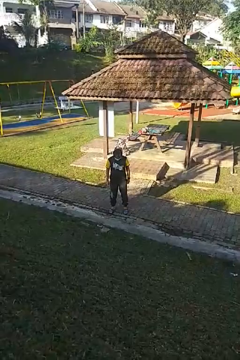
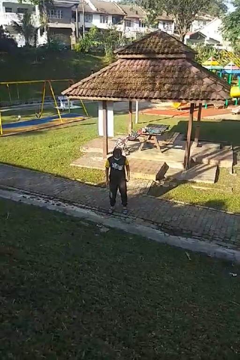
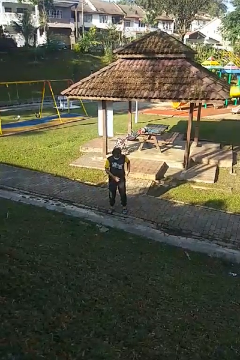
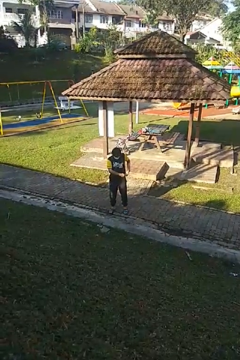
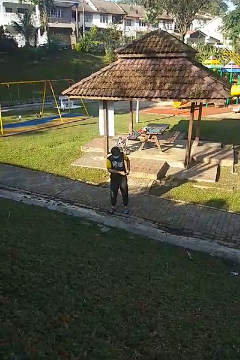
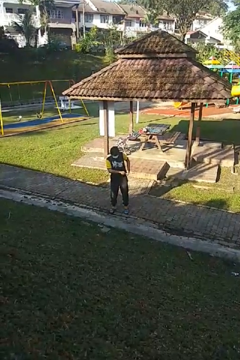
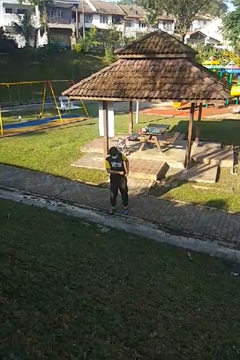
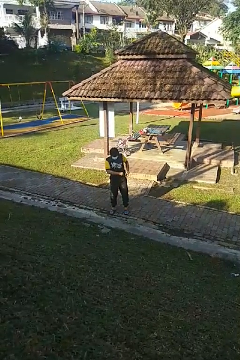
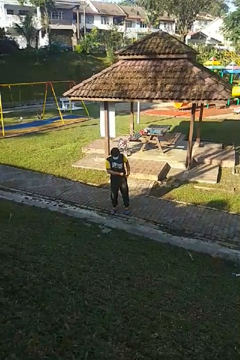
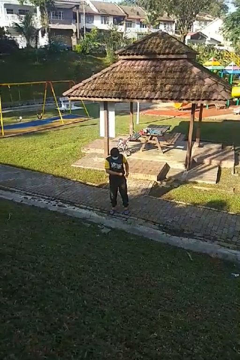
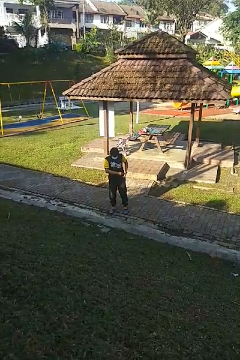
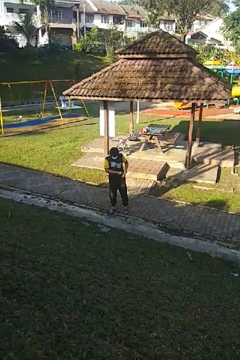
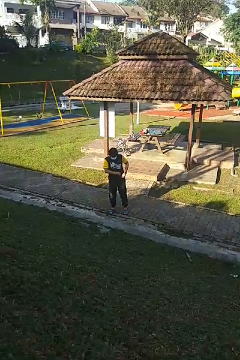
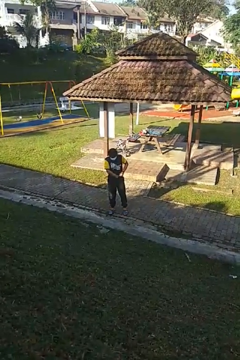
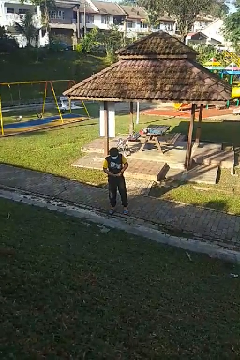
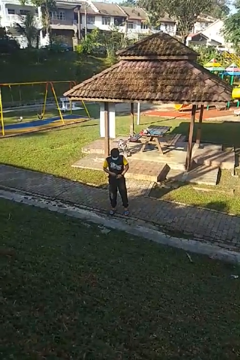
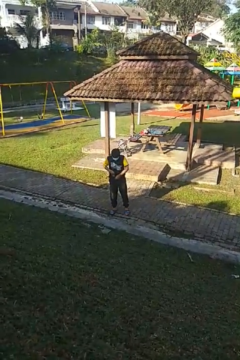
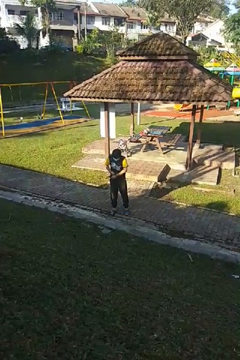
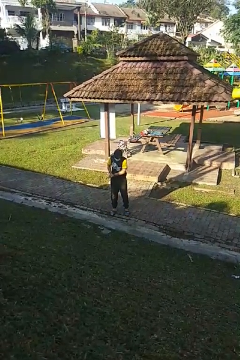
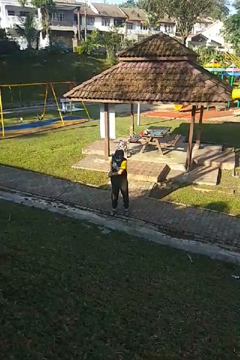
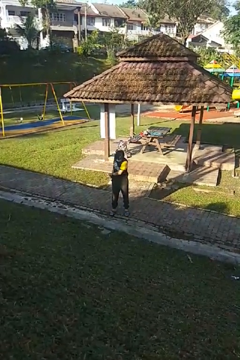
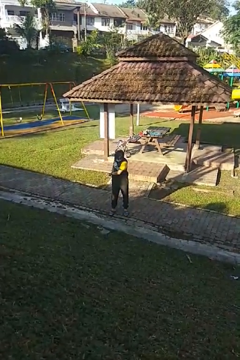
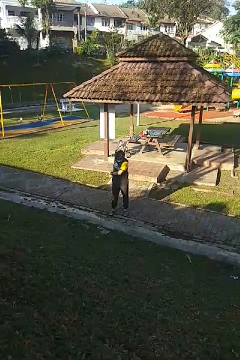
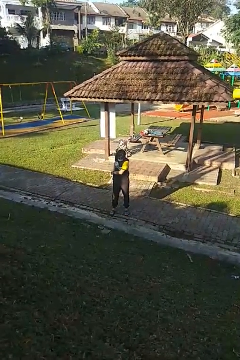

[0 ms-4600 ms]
person tucks in shirt

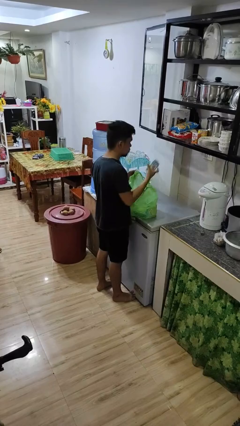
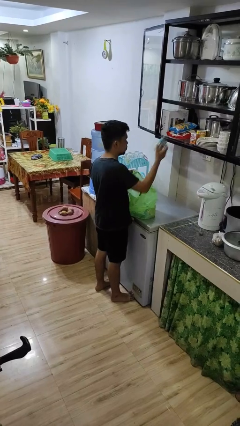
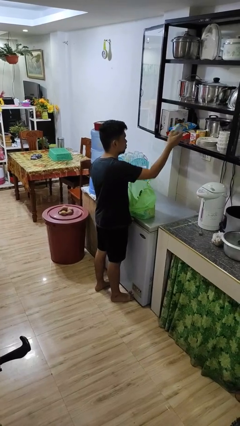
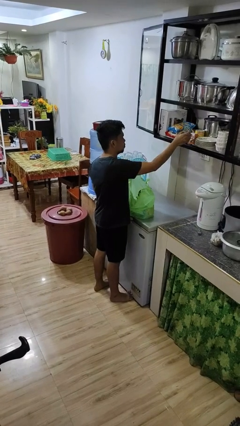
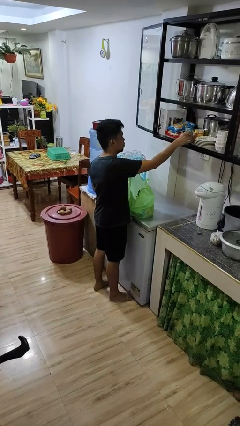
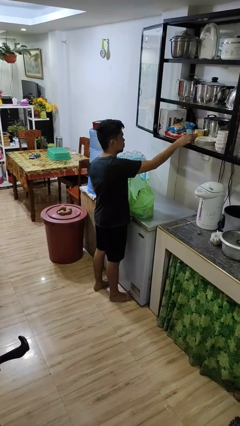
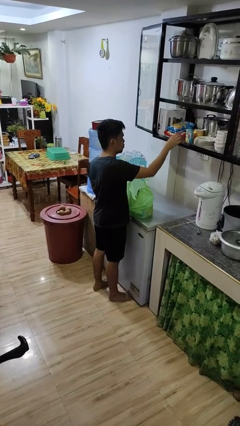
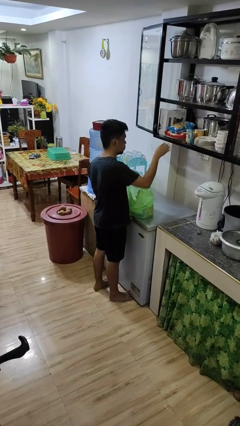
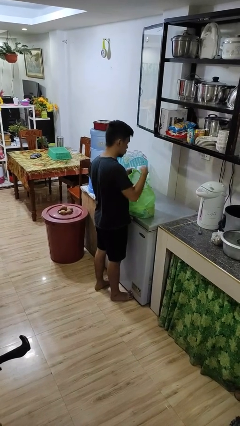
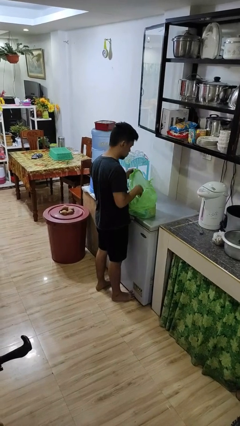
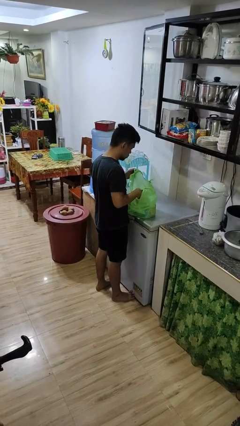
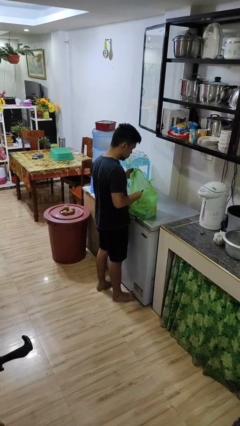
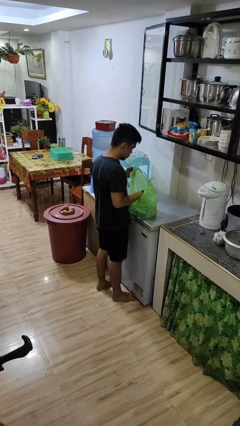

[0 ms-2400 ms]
person loads groceries into cabinet

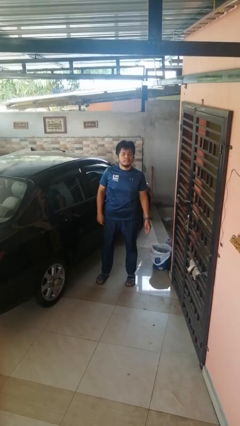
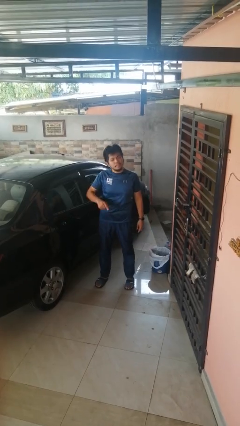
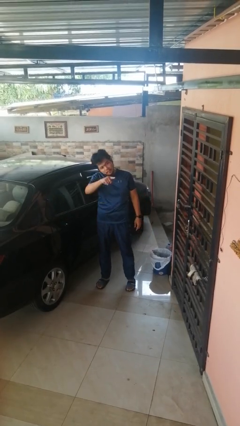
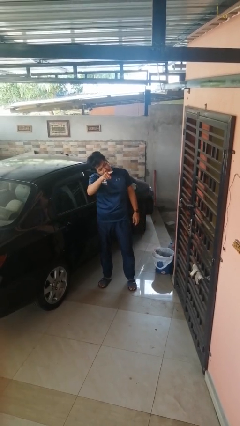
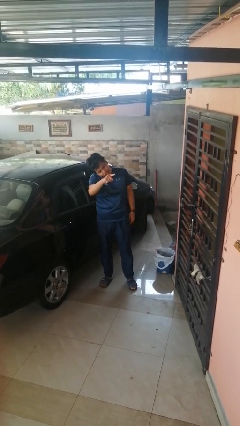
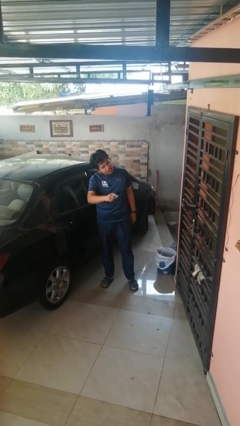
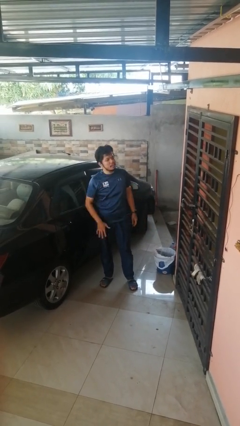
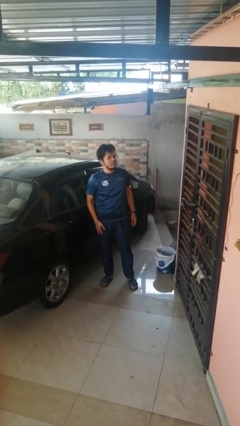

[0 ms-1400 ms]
person points at person

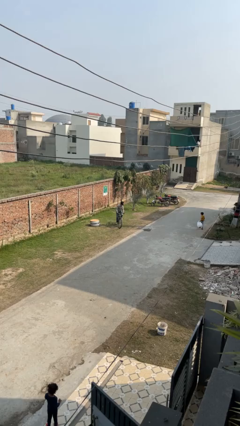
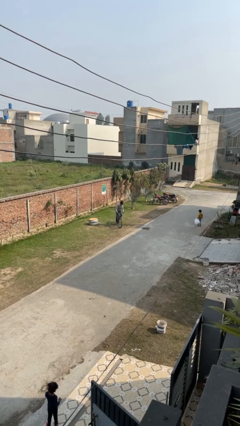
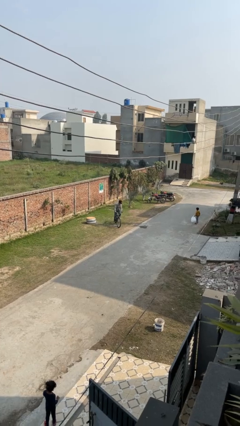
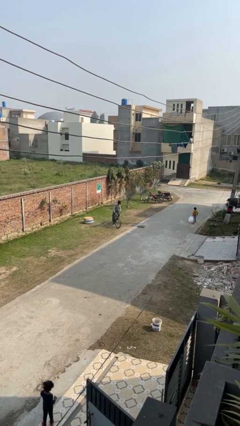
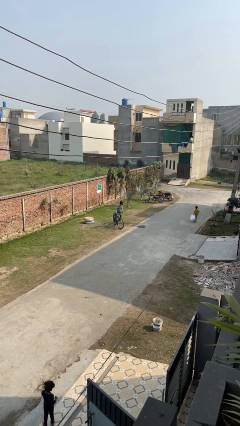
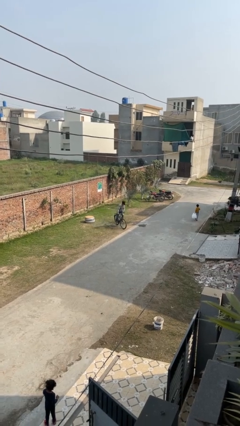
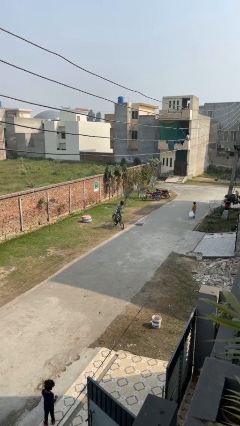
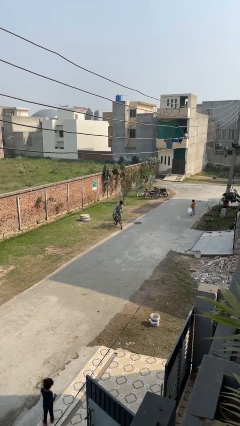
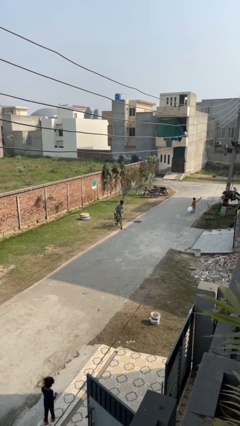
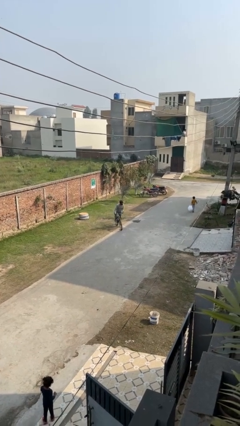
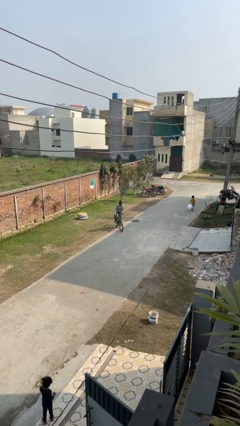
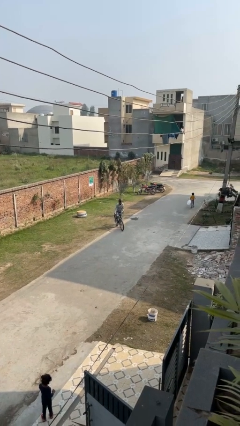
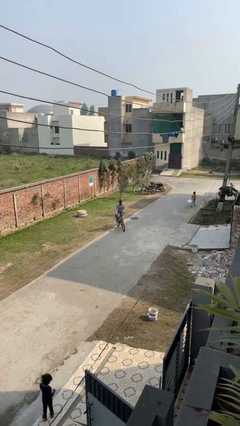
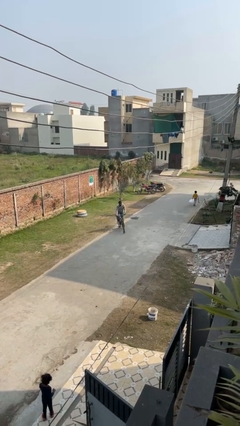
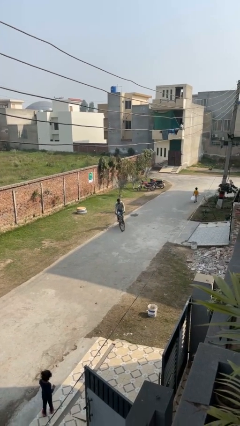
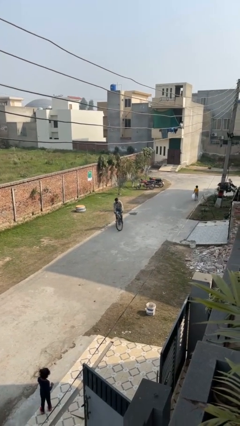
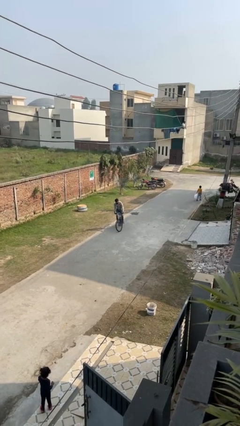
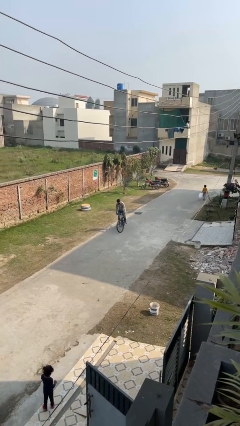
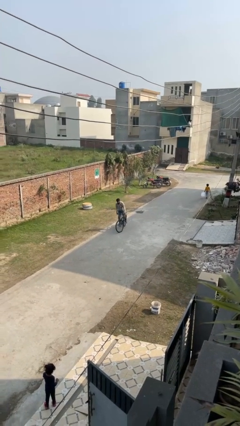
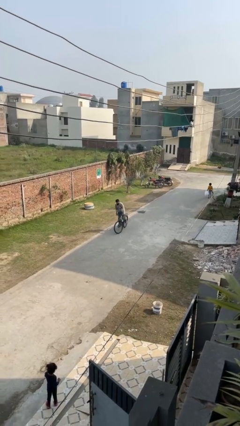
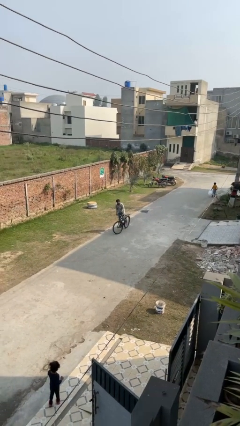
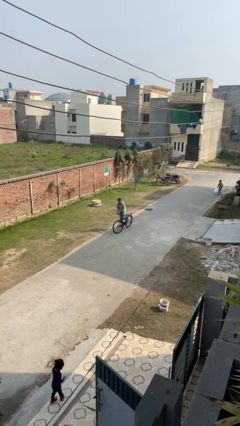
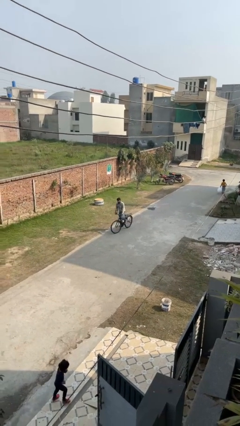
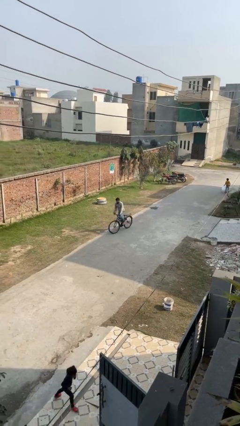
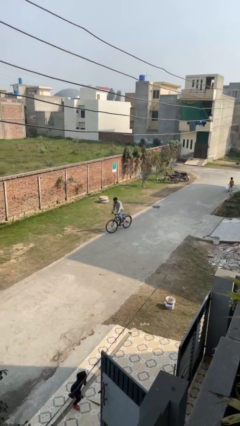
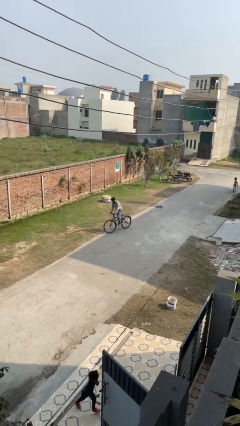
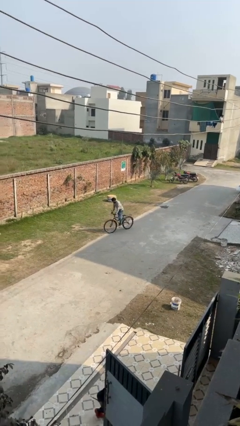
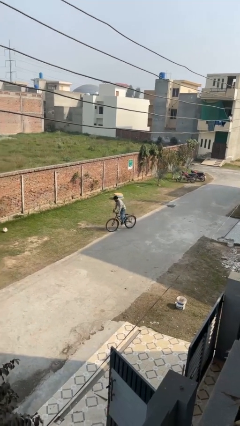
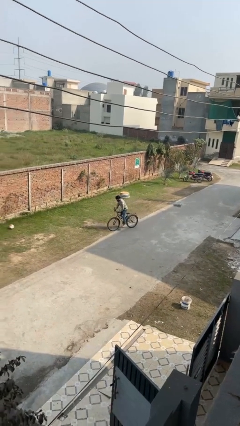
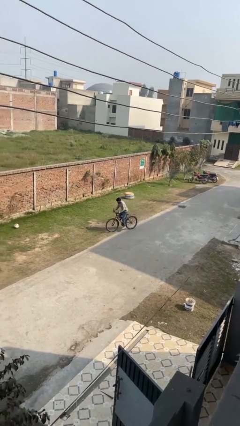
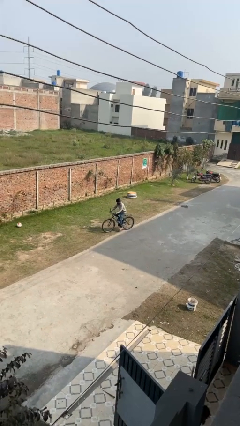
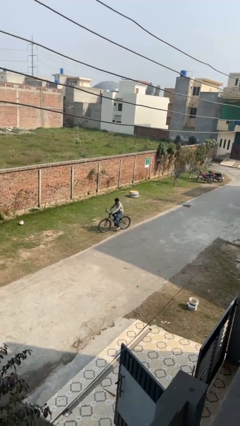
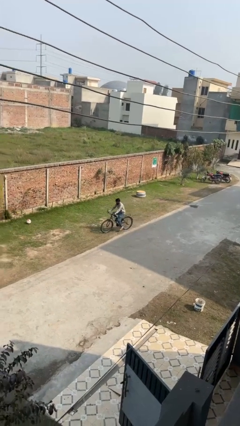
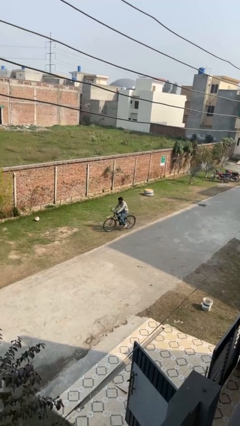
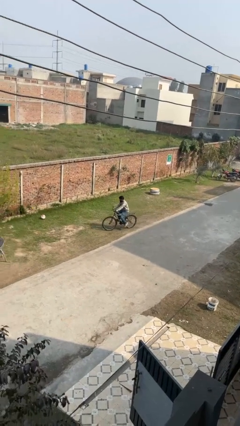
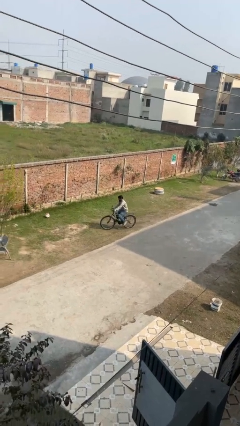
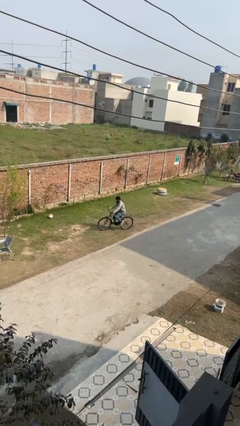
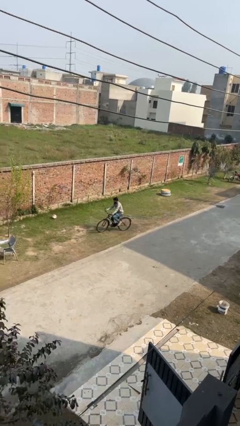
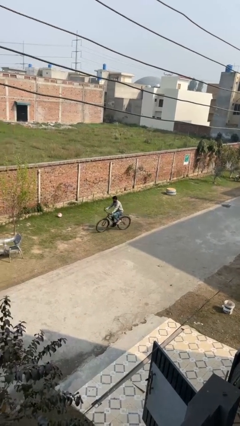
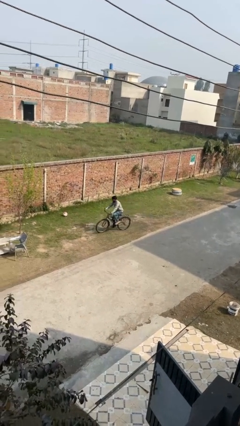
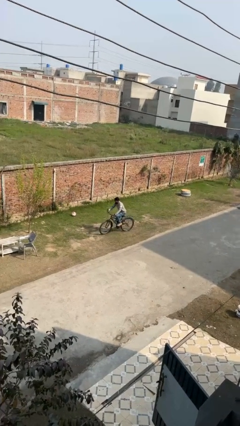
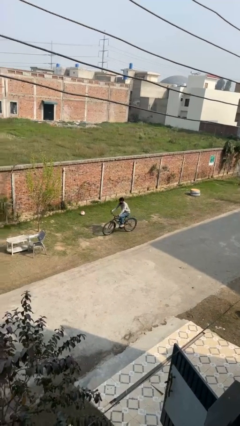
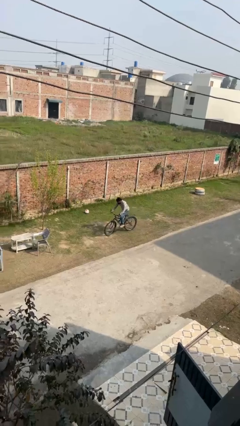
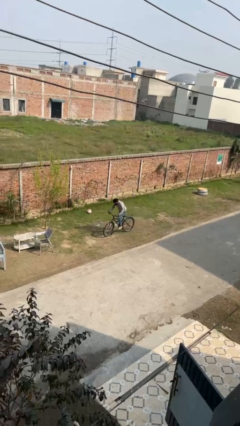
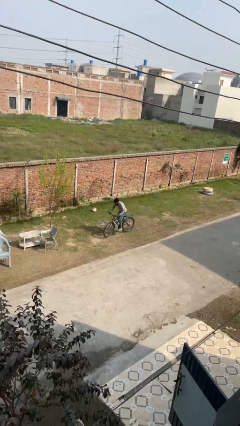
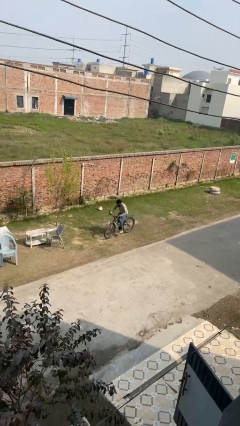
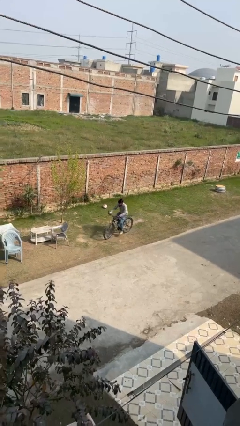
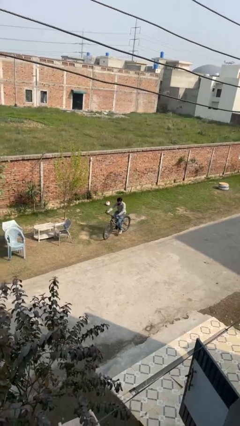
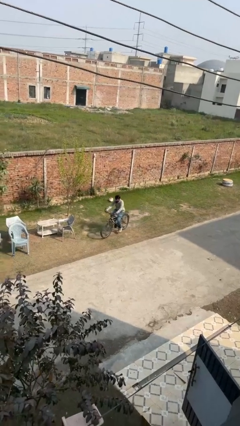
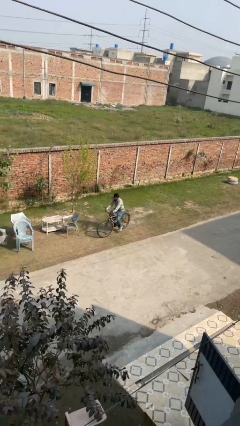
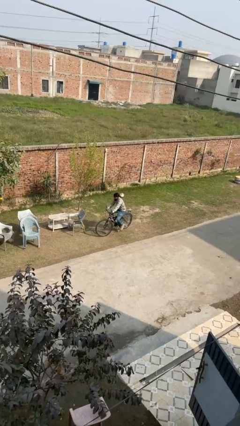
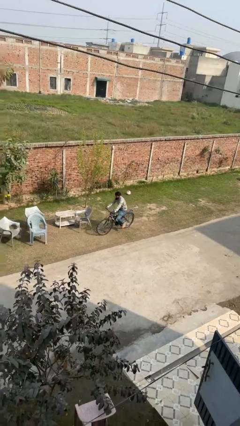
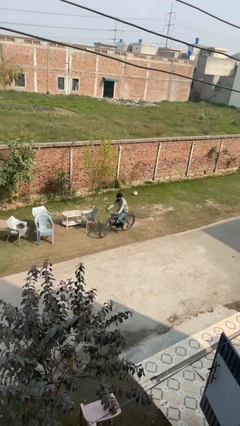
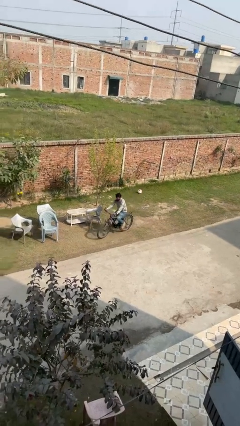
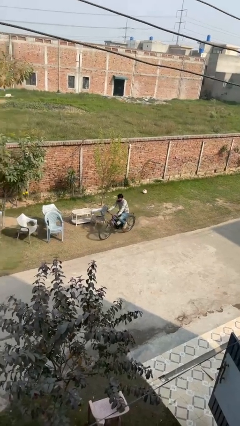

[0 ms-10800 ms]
person rides bicycle
